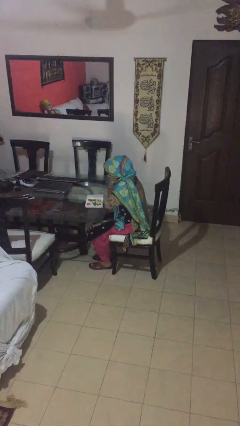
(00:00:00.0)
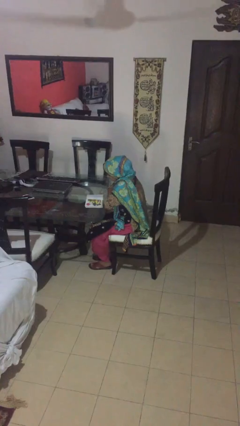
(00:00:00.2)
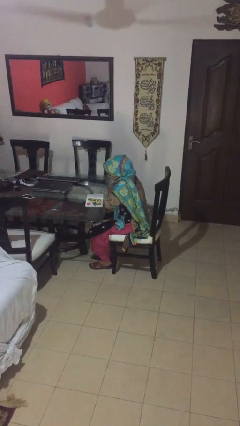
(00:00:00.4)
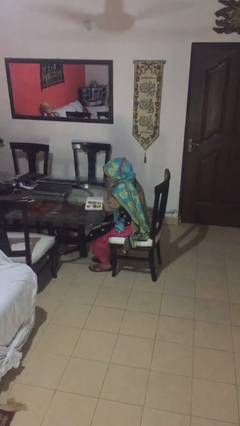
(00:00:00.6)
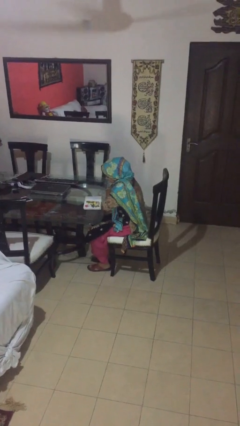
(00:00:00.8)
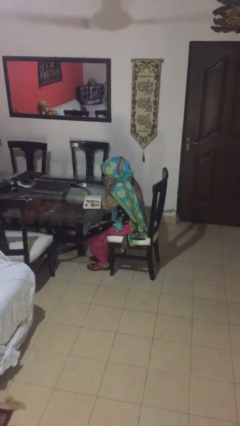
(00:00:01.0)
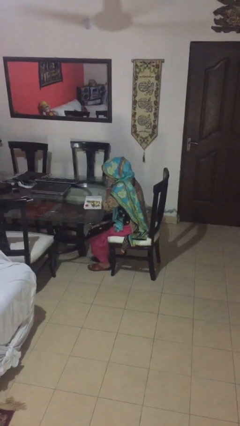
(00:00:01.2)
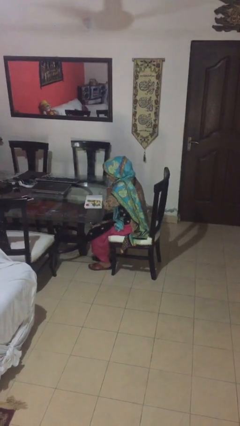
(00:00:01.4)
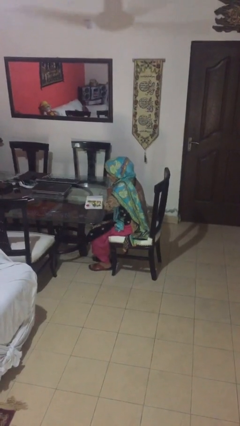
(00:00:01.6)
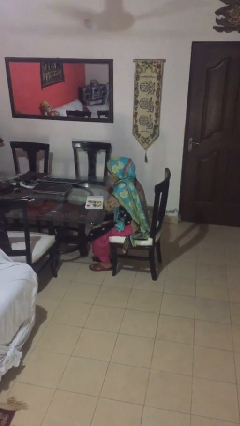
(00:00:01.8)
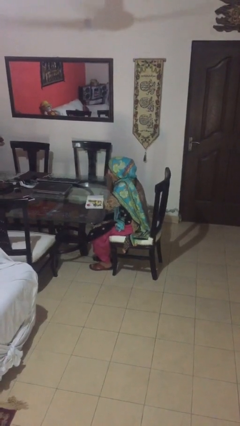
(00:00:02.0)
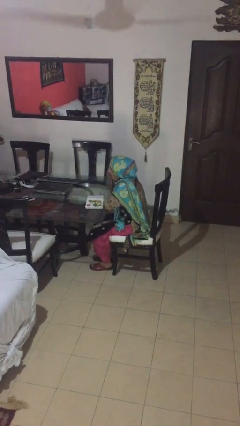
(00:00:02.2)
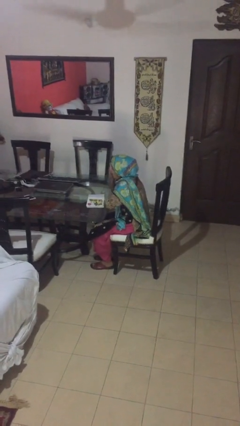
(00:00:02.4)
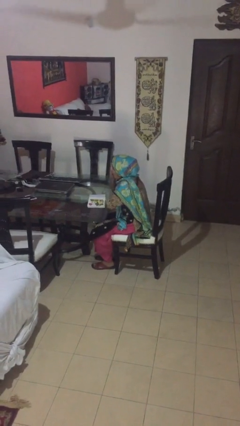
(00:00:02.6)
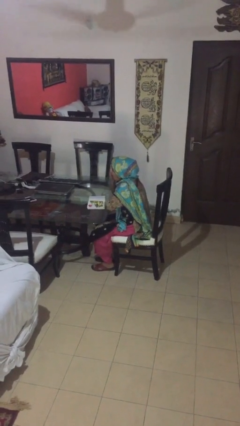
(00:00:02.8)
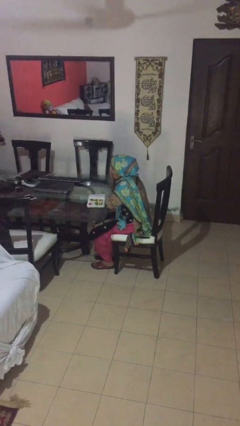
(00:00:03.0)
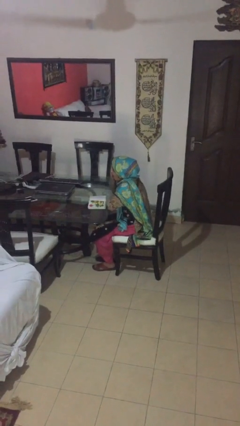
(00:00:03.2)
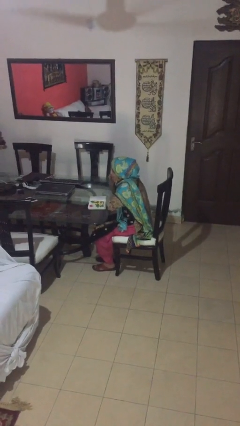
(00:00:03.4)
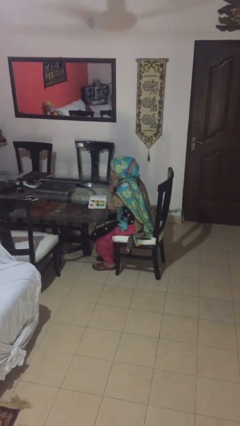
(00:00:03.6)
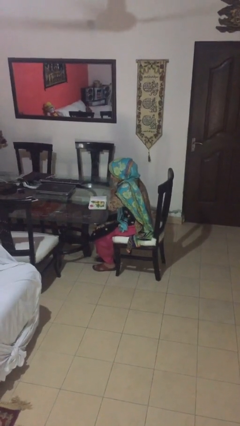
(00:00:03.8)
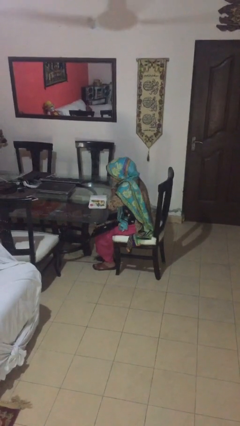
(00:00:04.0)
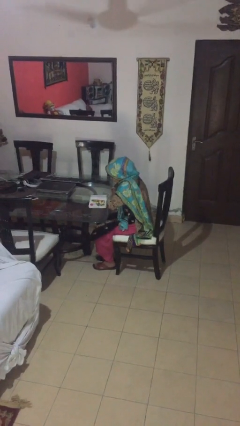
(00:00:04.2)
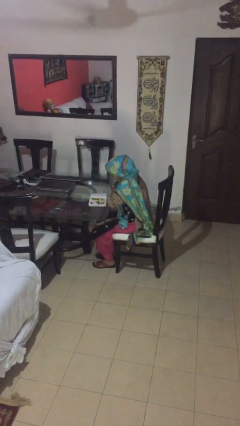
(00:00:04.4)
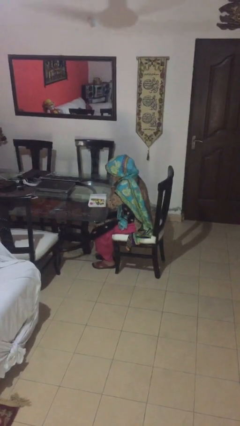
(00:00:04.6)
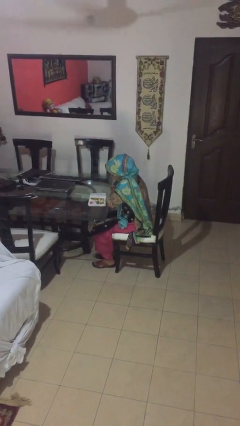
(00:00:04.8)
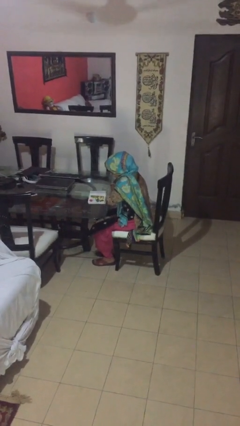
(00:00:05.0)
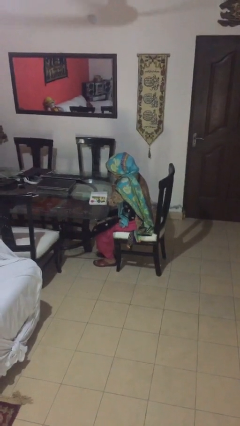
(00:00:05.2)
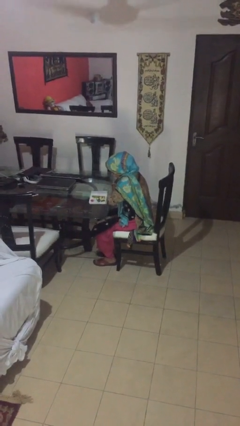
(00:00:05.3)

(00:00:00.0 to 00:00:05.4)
person reads document

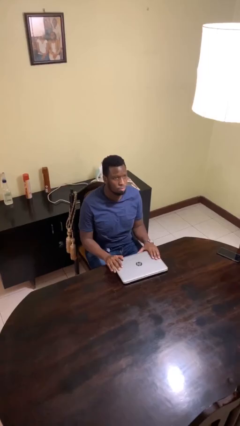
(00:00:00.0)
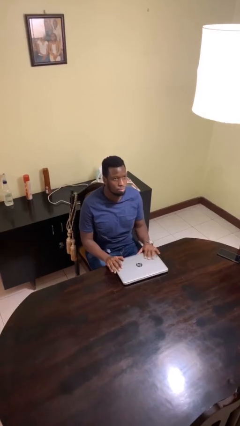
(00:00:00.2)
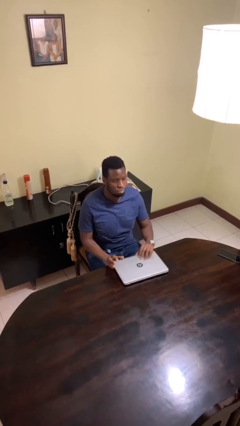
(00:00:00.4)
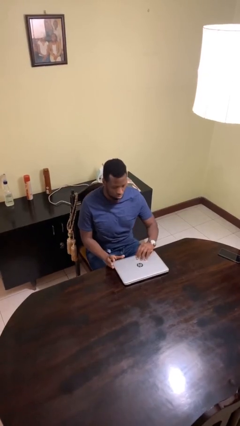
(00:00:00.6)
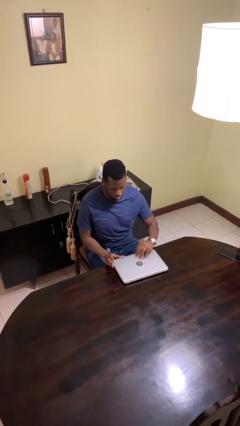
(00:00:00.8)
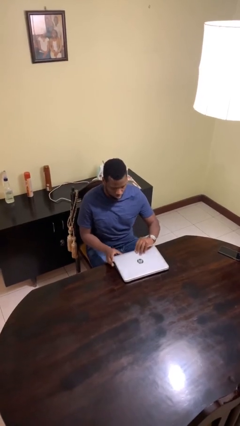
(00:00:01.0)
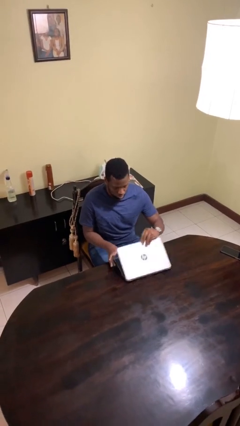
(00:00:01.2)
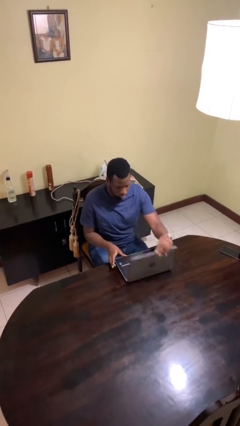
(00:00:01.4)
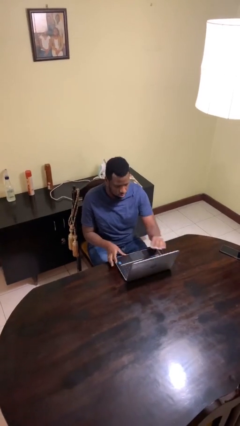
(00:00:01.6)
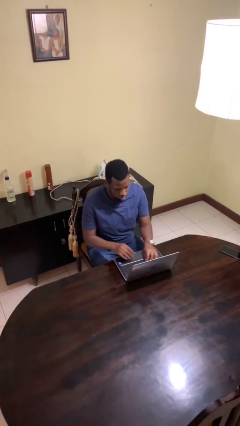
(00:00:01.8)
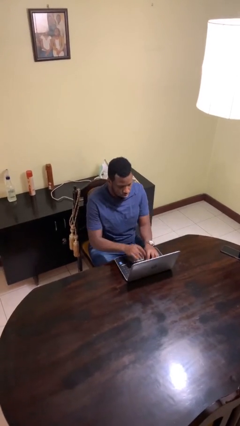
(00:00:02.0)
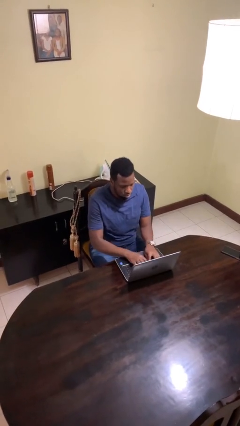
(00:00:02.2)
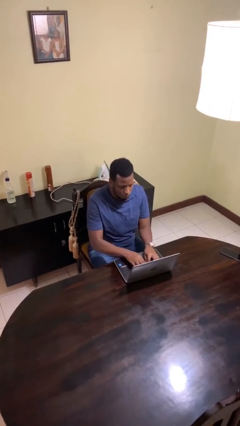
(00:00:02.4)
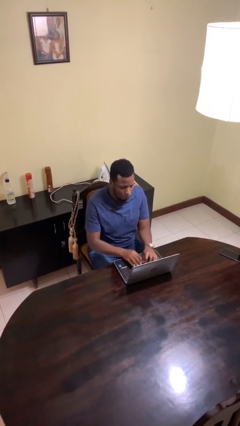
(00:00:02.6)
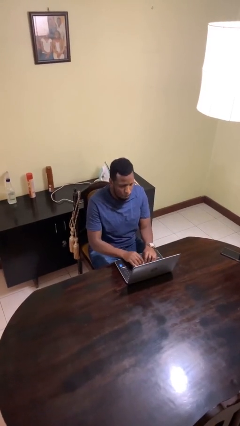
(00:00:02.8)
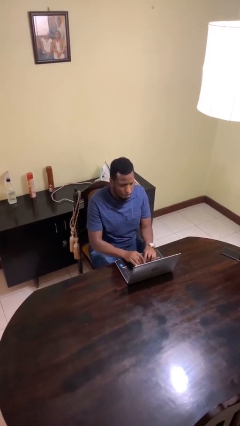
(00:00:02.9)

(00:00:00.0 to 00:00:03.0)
person interacts with laptop

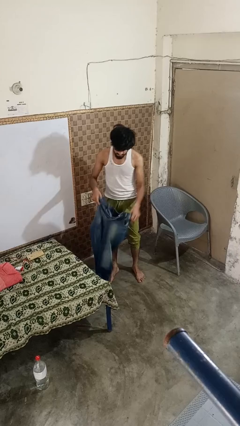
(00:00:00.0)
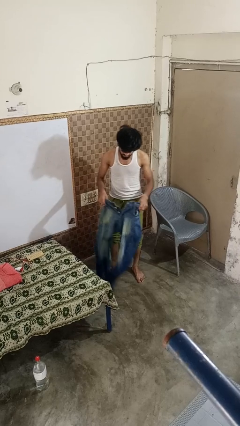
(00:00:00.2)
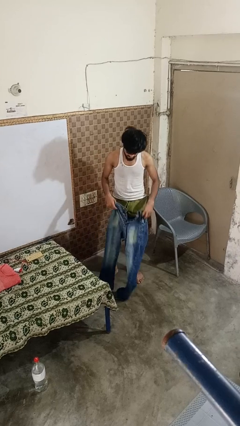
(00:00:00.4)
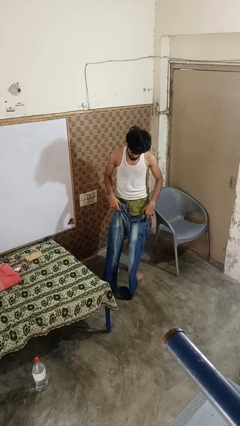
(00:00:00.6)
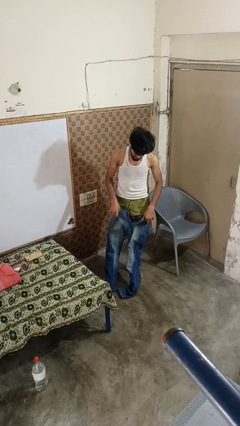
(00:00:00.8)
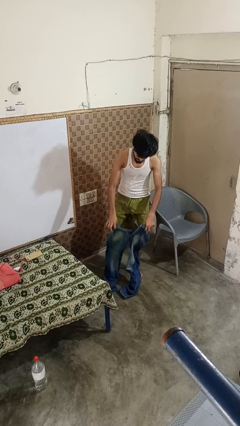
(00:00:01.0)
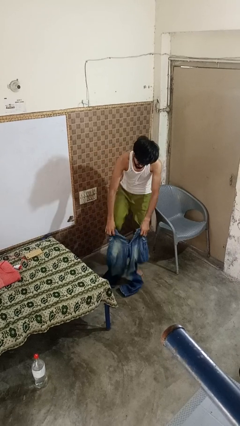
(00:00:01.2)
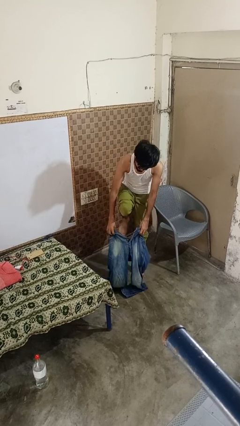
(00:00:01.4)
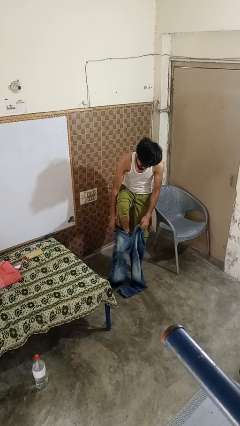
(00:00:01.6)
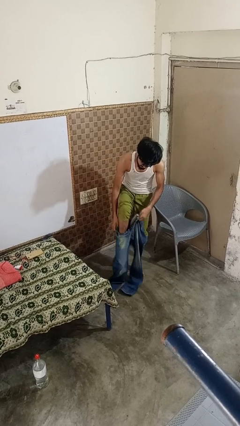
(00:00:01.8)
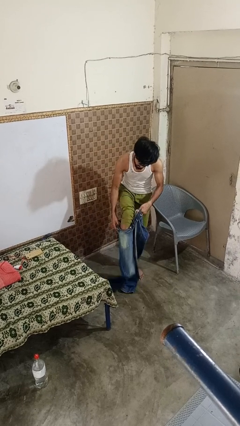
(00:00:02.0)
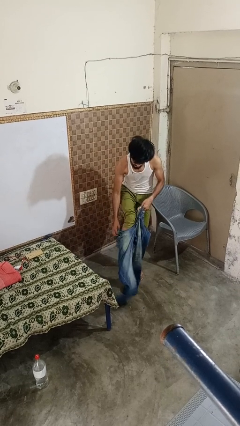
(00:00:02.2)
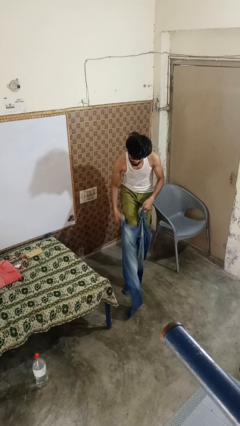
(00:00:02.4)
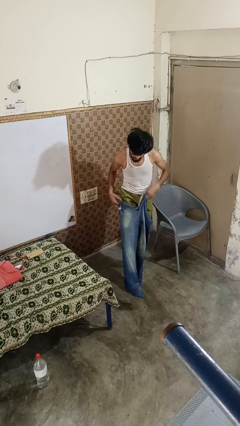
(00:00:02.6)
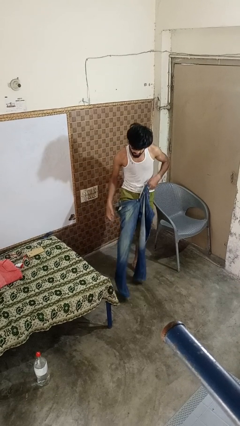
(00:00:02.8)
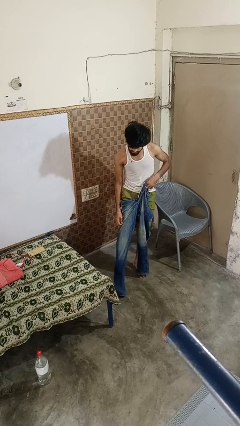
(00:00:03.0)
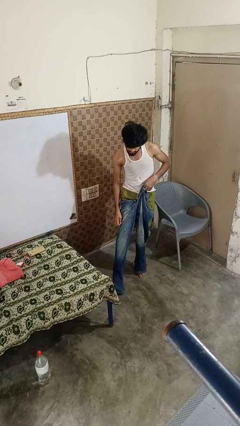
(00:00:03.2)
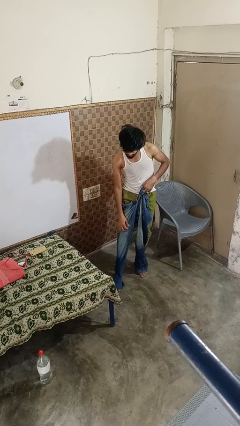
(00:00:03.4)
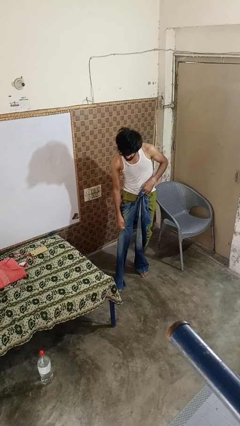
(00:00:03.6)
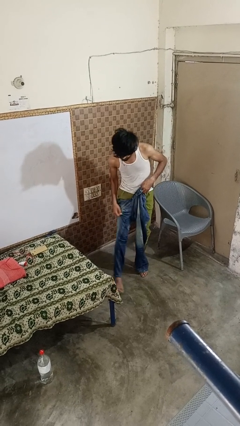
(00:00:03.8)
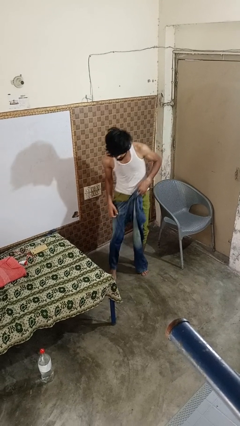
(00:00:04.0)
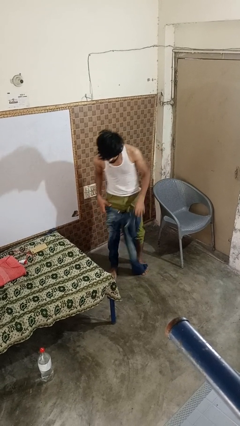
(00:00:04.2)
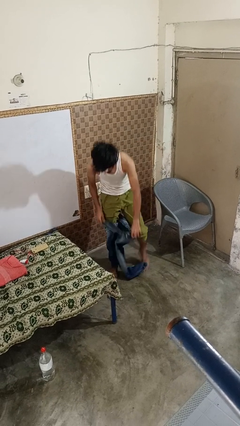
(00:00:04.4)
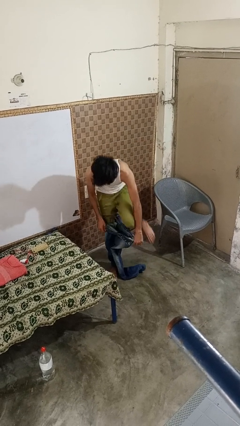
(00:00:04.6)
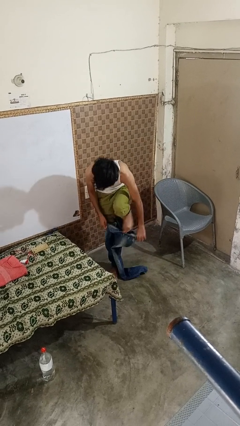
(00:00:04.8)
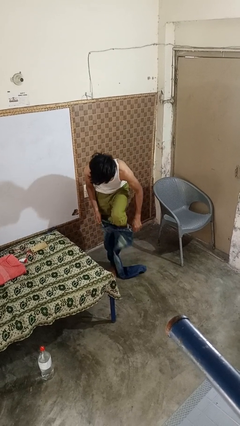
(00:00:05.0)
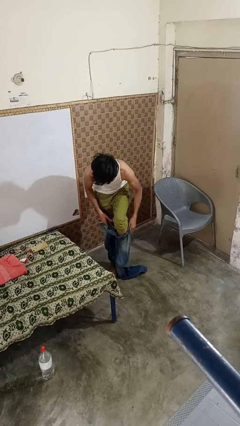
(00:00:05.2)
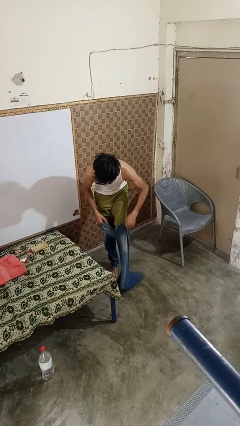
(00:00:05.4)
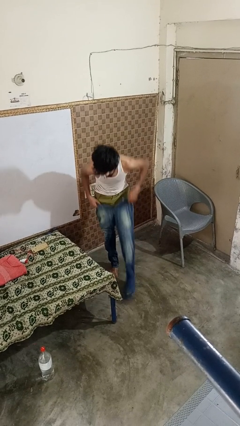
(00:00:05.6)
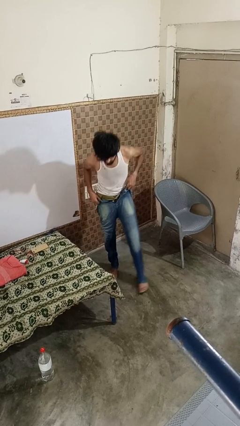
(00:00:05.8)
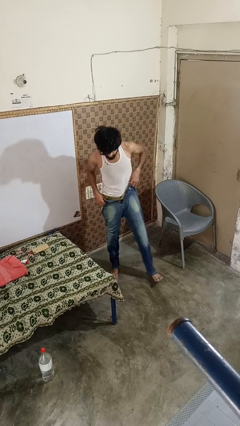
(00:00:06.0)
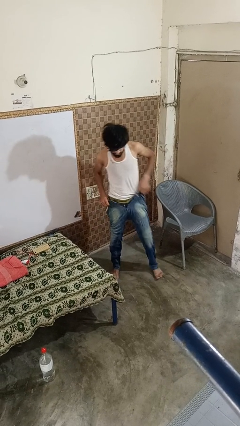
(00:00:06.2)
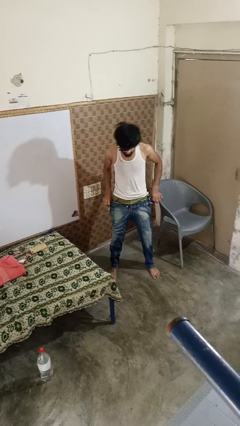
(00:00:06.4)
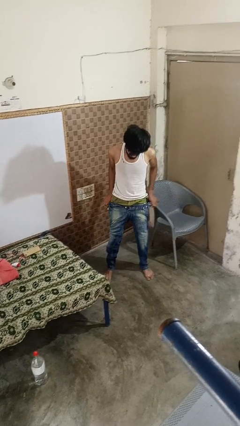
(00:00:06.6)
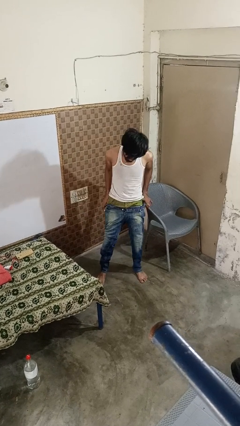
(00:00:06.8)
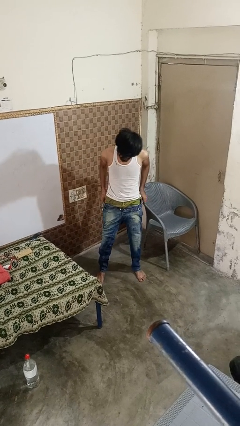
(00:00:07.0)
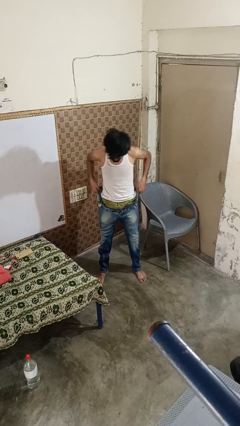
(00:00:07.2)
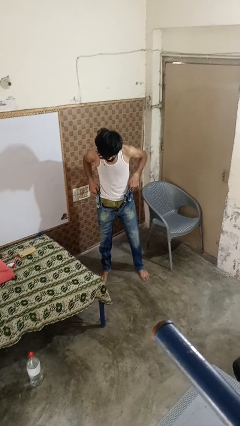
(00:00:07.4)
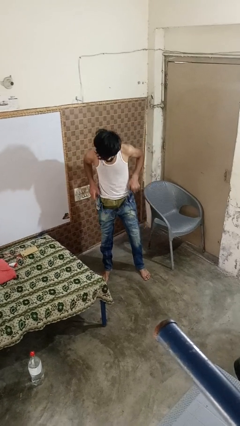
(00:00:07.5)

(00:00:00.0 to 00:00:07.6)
person puts on pants

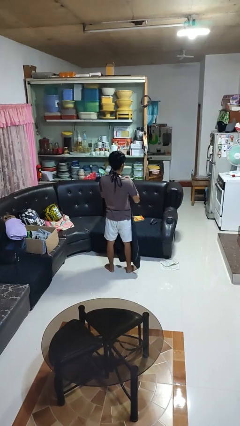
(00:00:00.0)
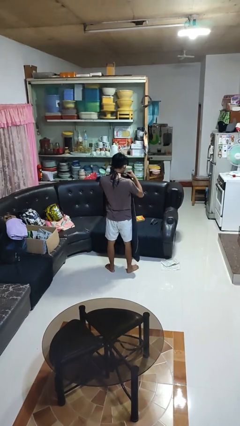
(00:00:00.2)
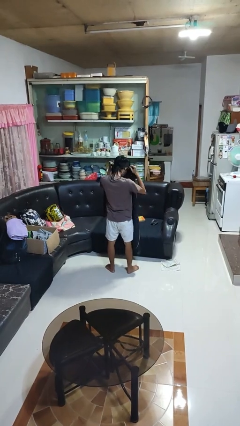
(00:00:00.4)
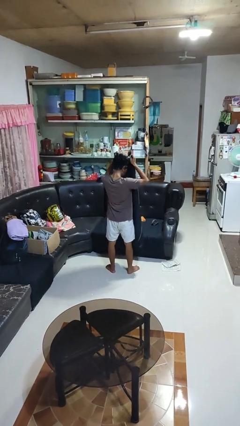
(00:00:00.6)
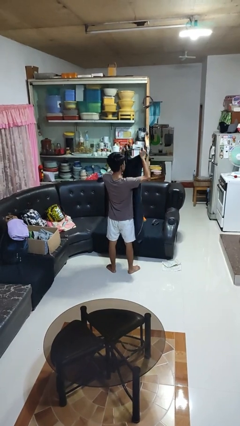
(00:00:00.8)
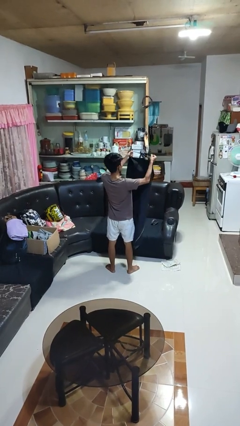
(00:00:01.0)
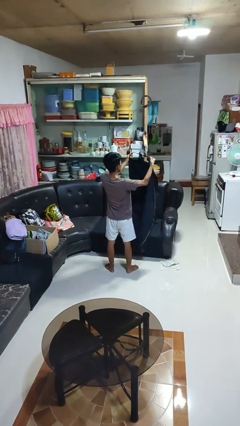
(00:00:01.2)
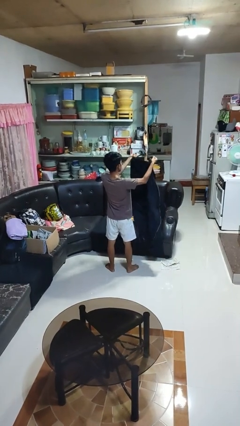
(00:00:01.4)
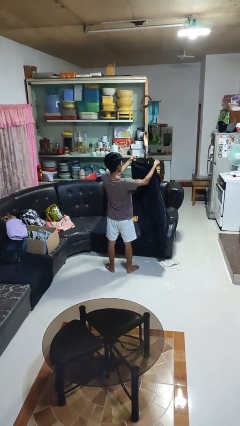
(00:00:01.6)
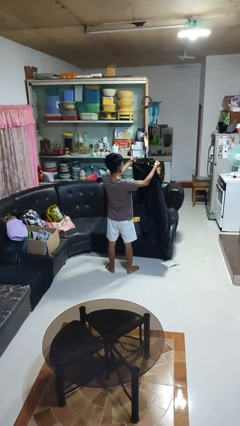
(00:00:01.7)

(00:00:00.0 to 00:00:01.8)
person takes off apron
